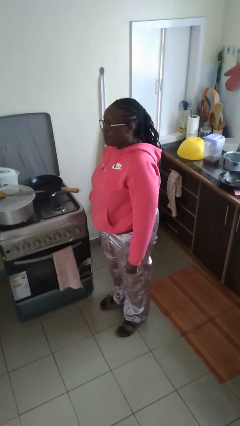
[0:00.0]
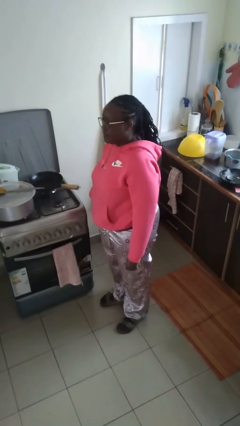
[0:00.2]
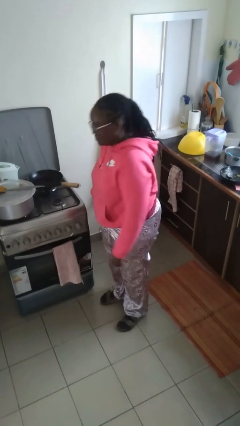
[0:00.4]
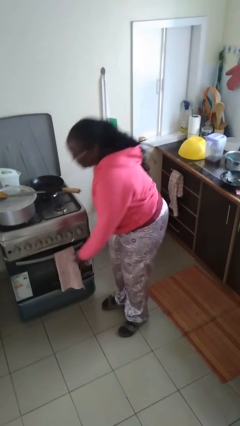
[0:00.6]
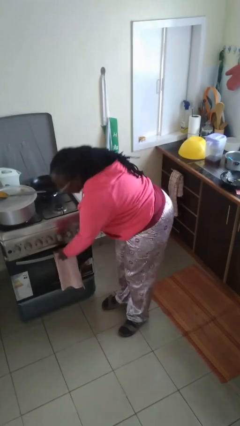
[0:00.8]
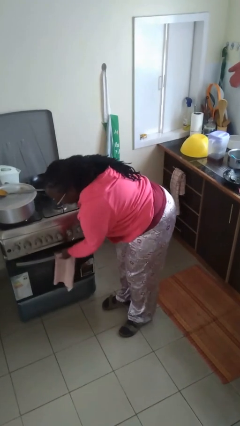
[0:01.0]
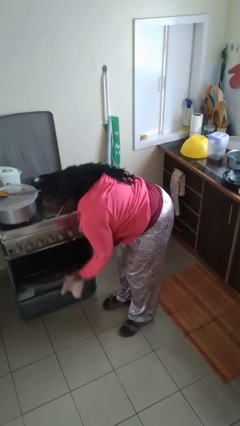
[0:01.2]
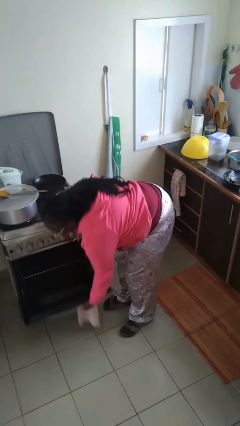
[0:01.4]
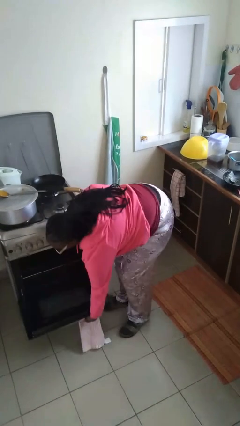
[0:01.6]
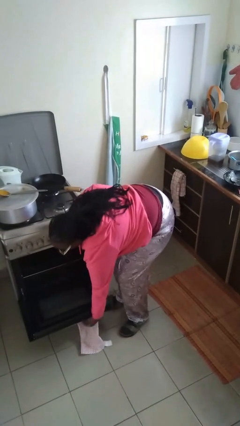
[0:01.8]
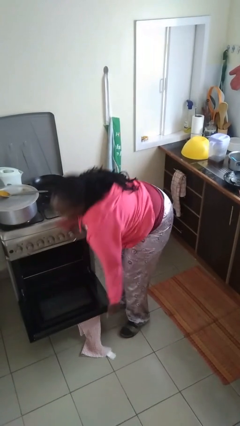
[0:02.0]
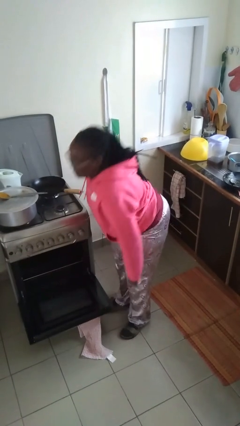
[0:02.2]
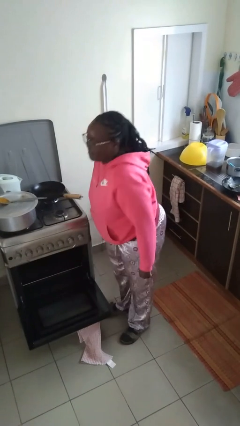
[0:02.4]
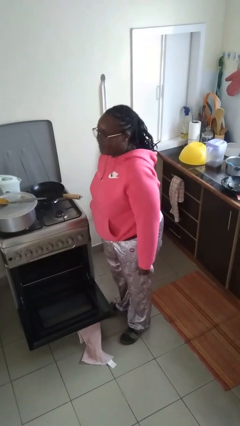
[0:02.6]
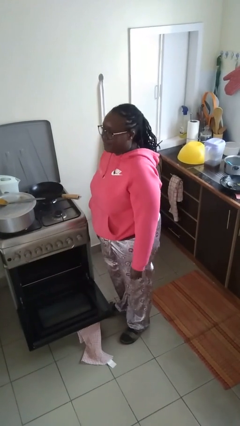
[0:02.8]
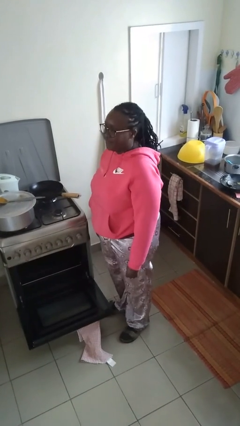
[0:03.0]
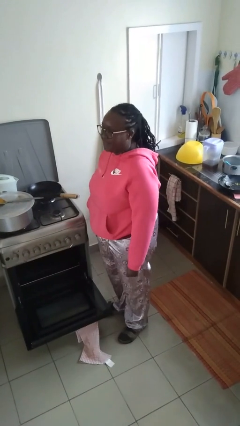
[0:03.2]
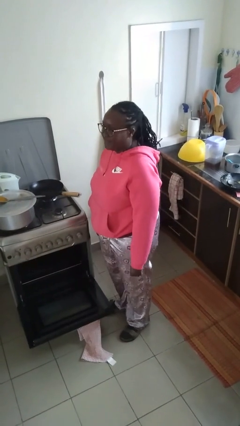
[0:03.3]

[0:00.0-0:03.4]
person opens oven door

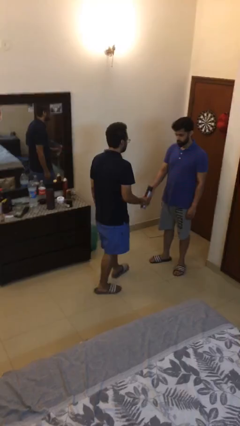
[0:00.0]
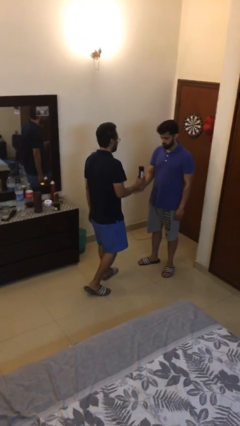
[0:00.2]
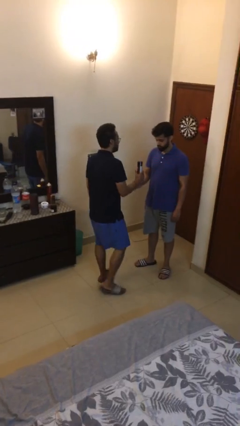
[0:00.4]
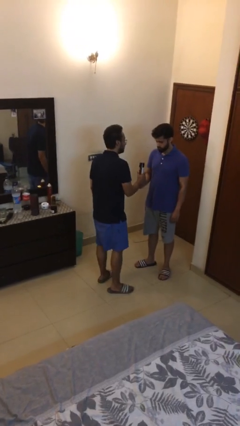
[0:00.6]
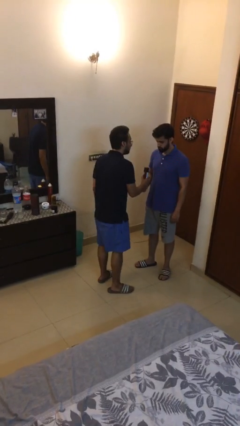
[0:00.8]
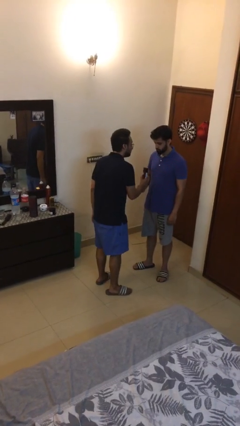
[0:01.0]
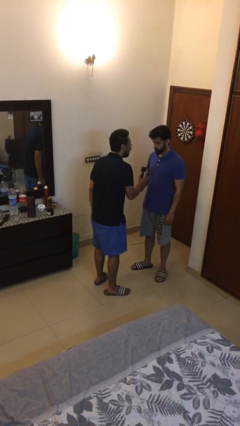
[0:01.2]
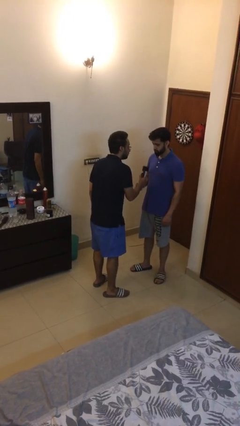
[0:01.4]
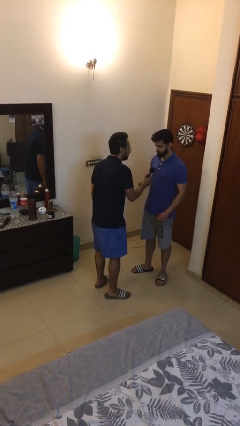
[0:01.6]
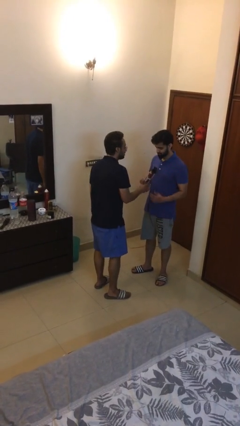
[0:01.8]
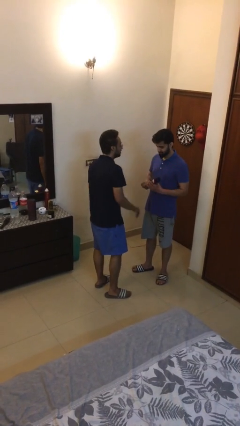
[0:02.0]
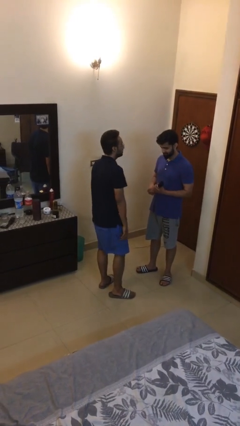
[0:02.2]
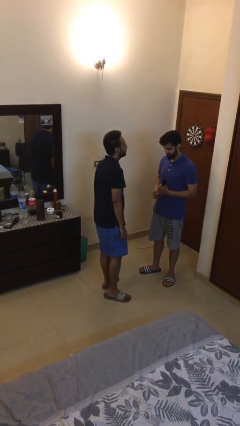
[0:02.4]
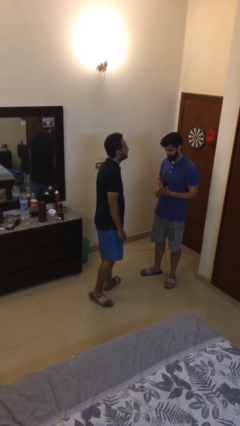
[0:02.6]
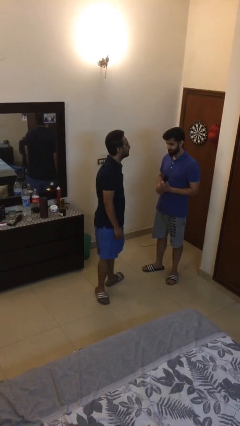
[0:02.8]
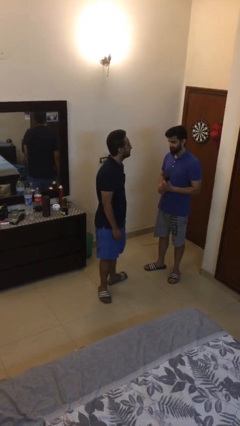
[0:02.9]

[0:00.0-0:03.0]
person transfers object to person

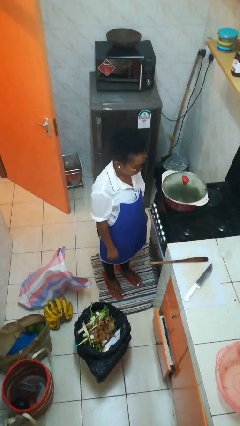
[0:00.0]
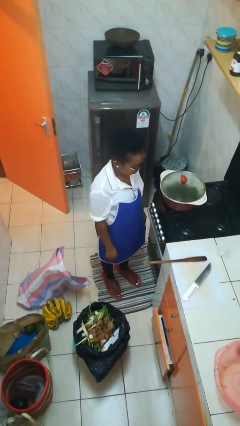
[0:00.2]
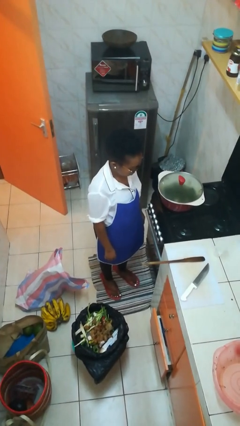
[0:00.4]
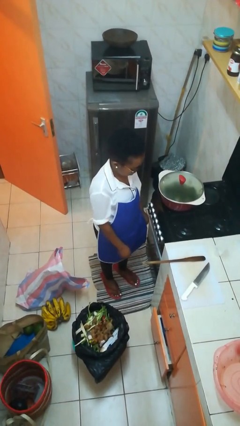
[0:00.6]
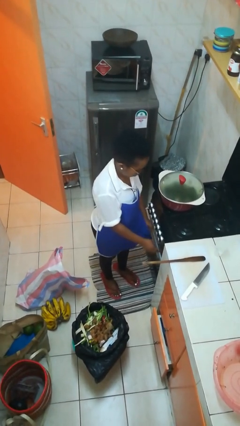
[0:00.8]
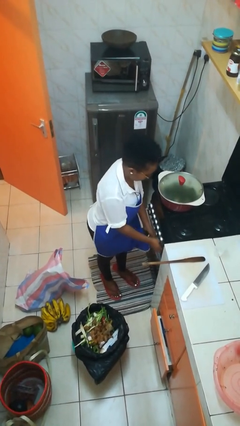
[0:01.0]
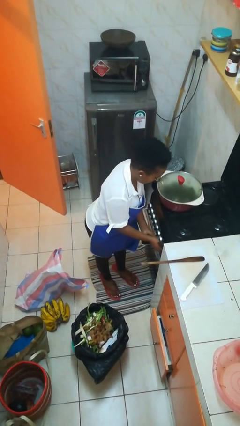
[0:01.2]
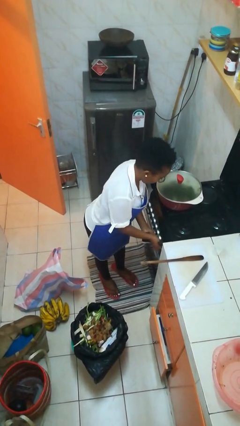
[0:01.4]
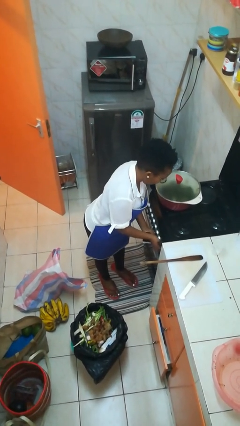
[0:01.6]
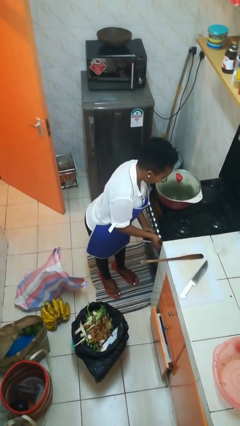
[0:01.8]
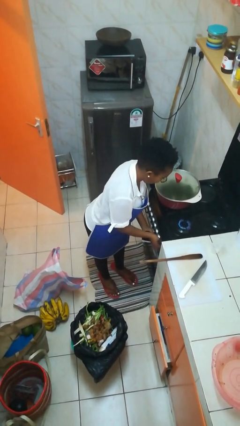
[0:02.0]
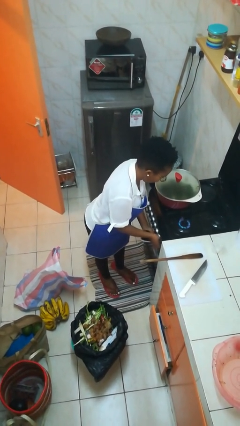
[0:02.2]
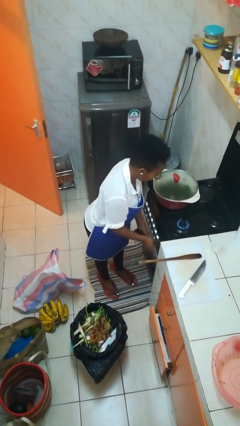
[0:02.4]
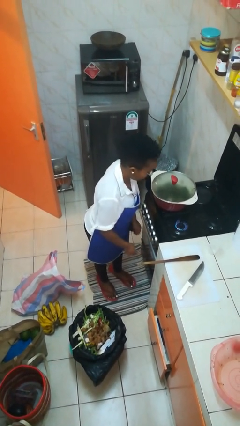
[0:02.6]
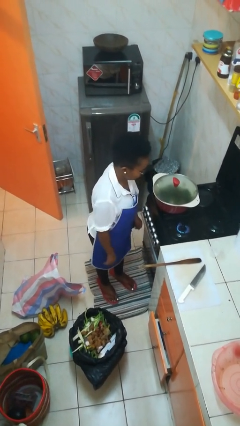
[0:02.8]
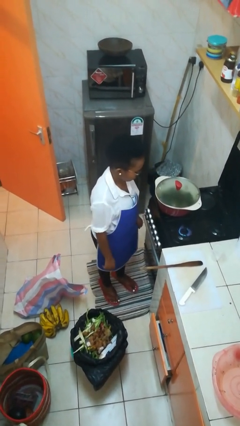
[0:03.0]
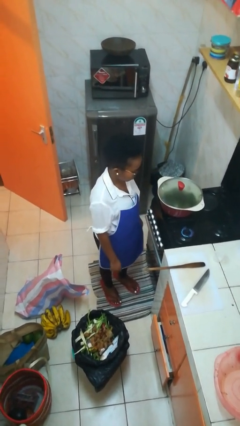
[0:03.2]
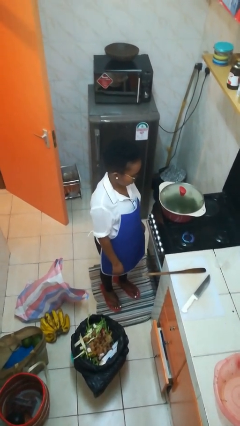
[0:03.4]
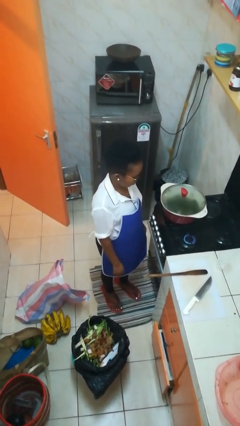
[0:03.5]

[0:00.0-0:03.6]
person turns on stovetop

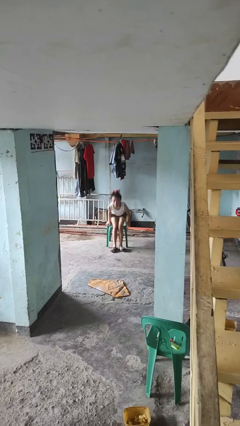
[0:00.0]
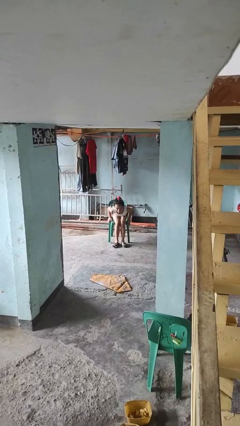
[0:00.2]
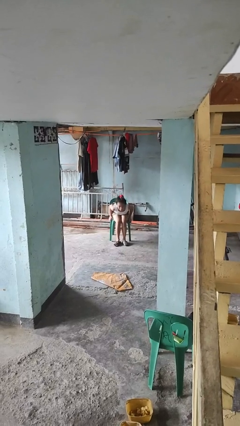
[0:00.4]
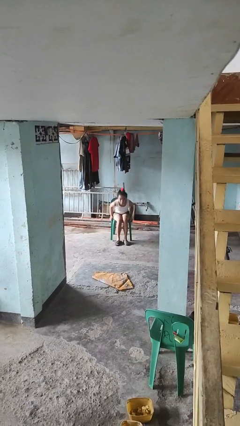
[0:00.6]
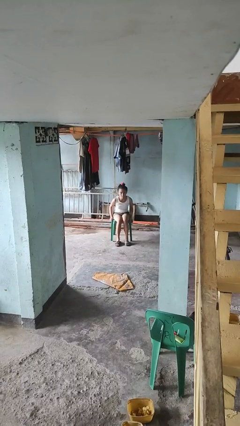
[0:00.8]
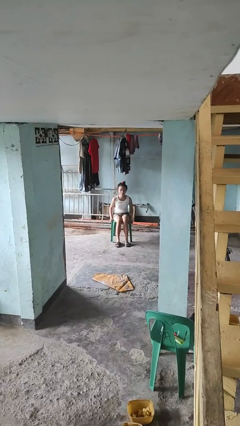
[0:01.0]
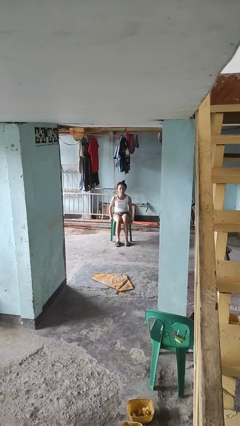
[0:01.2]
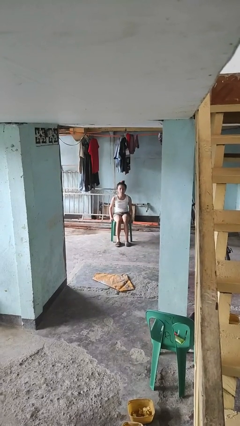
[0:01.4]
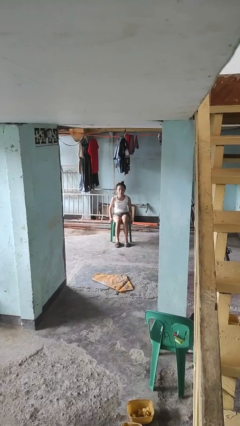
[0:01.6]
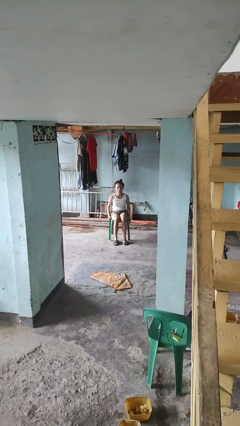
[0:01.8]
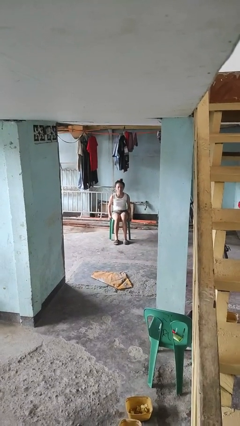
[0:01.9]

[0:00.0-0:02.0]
person sits down

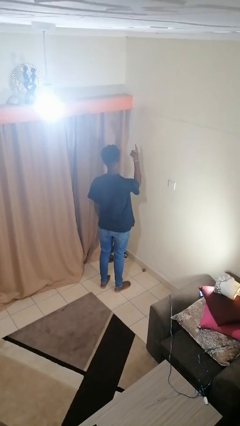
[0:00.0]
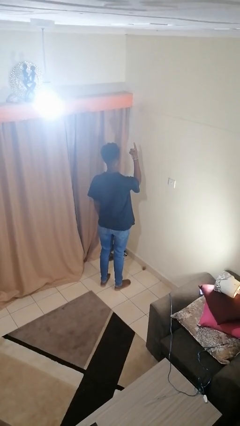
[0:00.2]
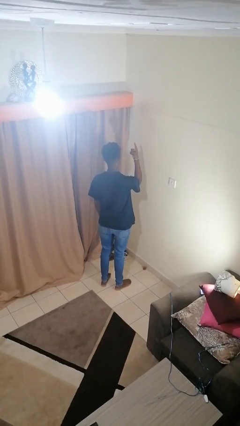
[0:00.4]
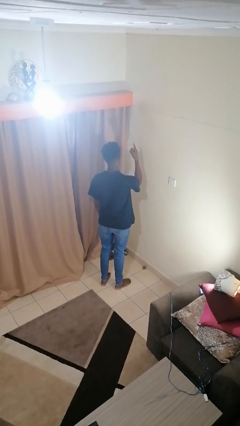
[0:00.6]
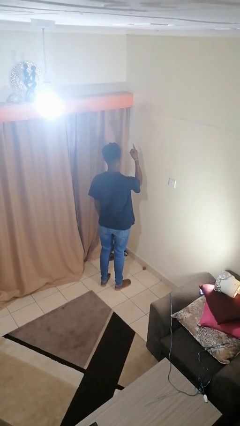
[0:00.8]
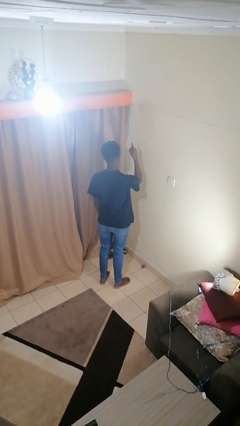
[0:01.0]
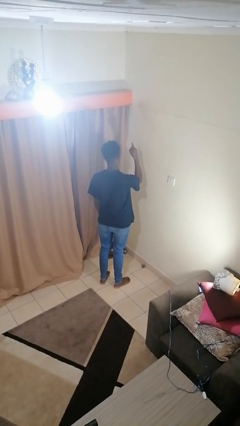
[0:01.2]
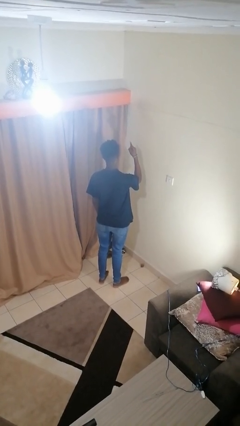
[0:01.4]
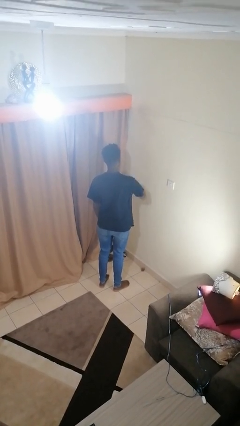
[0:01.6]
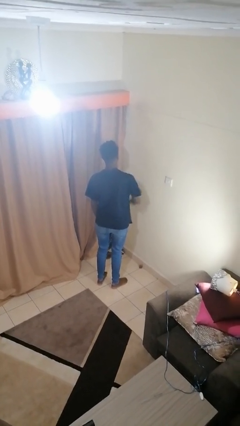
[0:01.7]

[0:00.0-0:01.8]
person gestures number one

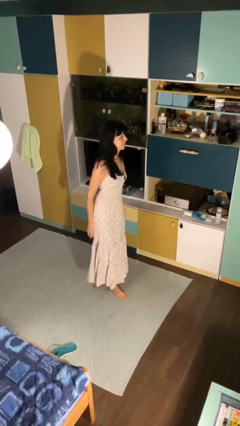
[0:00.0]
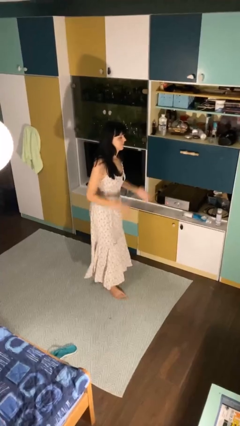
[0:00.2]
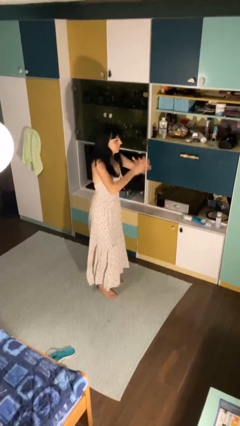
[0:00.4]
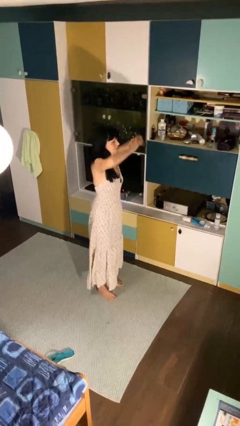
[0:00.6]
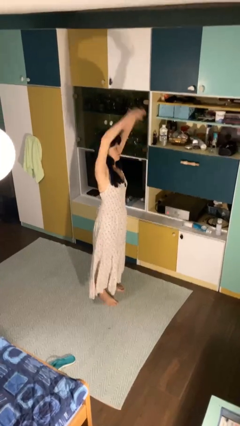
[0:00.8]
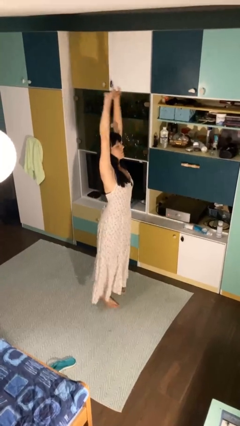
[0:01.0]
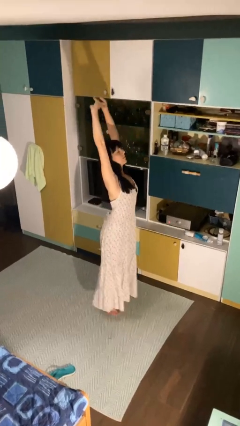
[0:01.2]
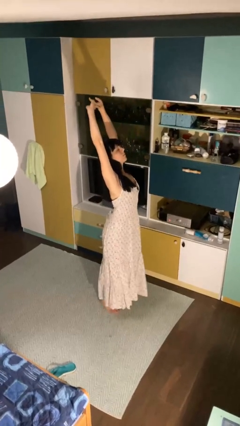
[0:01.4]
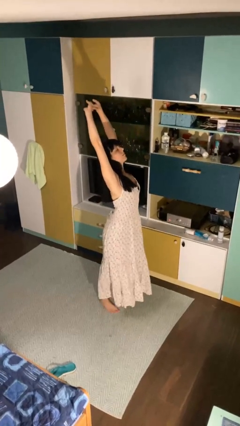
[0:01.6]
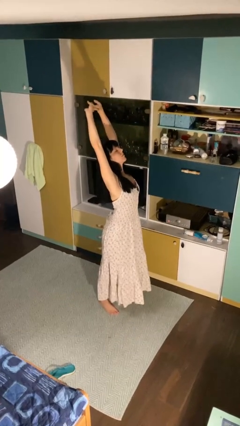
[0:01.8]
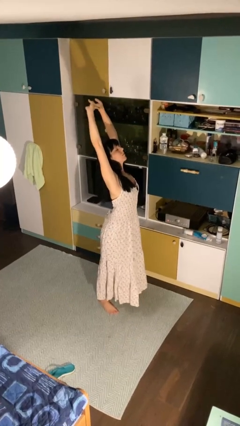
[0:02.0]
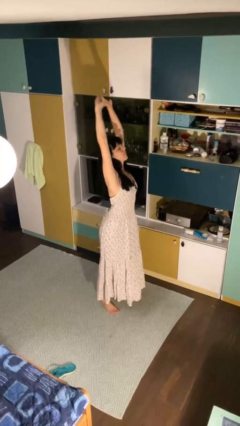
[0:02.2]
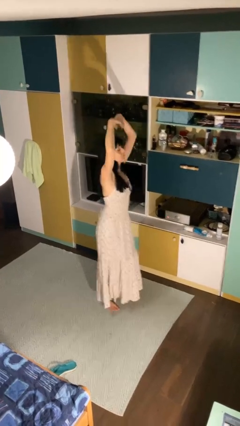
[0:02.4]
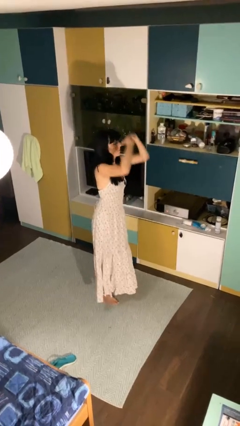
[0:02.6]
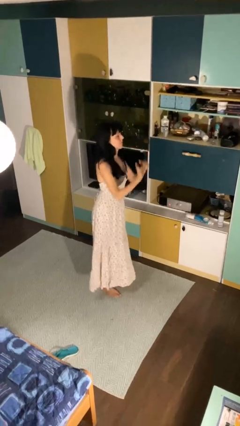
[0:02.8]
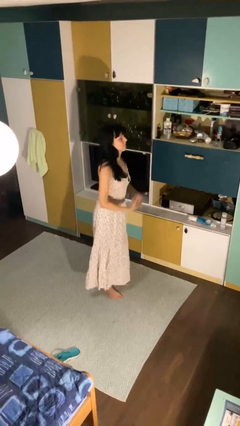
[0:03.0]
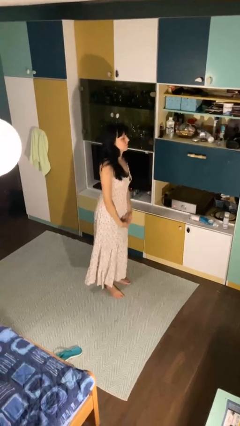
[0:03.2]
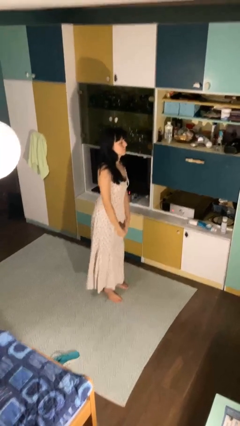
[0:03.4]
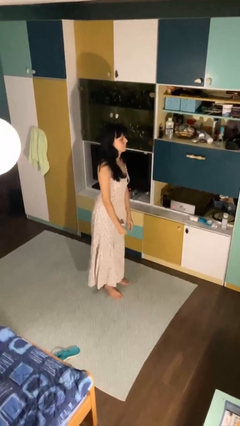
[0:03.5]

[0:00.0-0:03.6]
person stretches arms over head

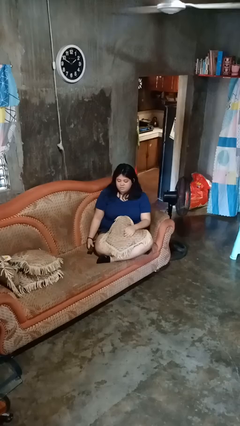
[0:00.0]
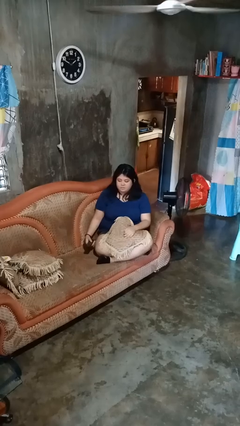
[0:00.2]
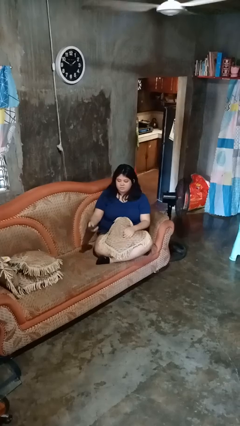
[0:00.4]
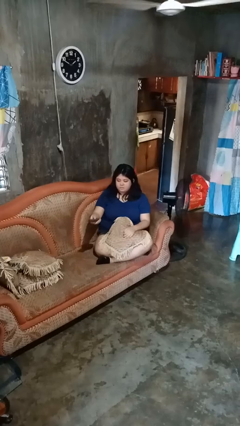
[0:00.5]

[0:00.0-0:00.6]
person uses television remote
